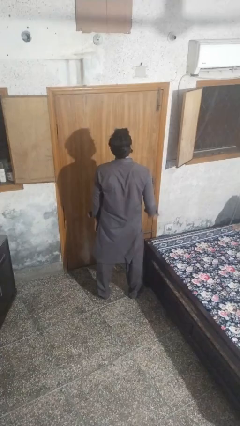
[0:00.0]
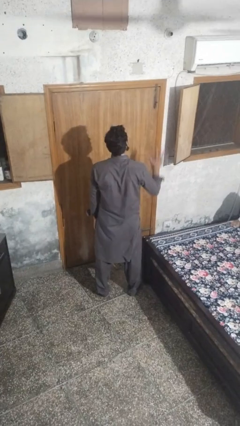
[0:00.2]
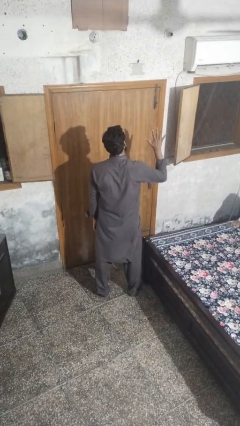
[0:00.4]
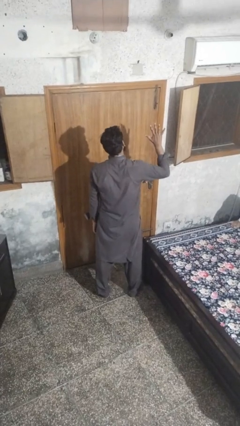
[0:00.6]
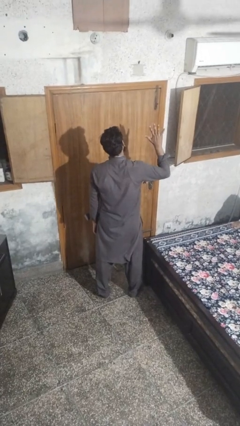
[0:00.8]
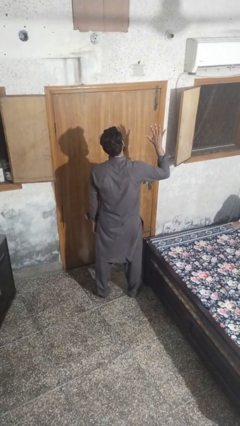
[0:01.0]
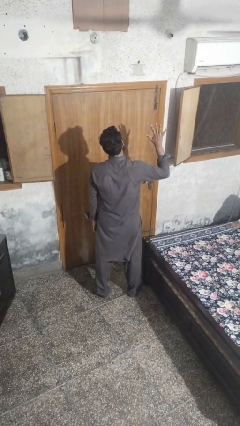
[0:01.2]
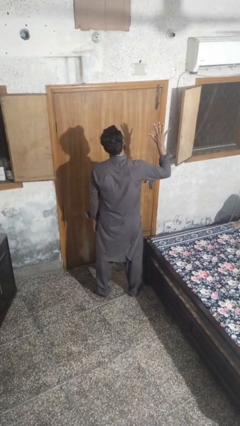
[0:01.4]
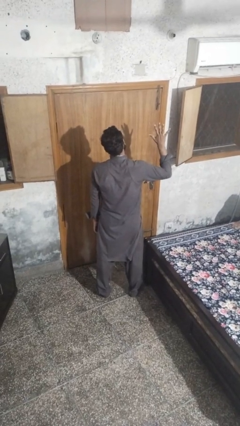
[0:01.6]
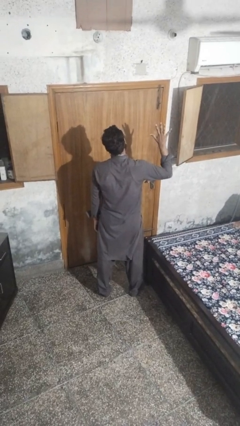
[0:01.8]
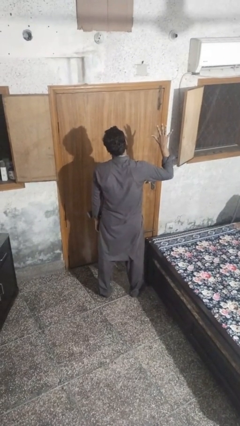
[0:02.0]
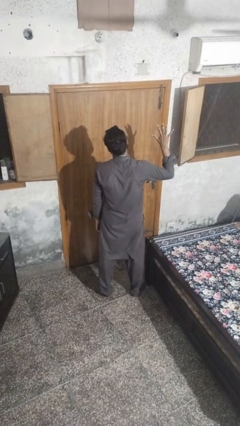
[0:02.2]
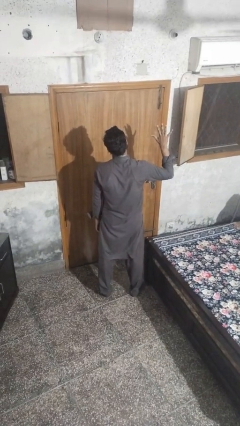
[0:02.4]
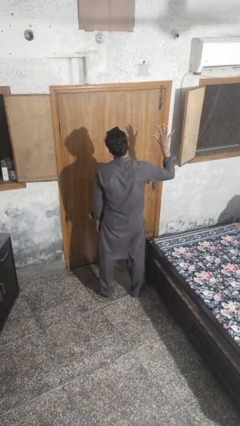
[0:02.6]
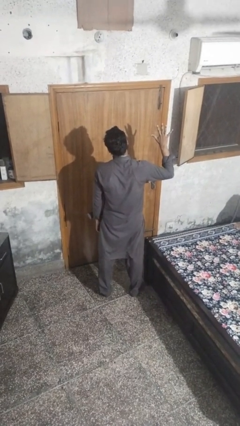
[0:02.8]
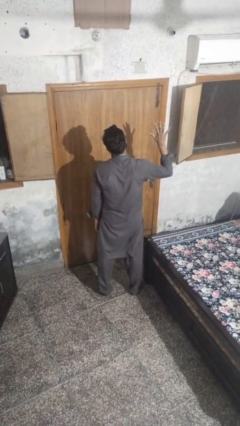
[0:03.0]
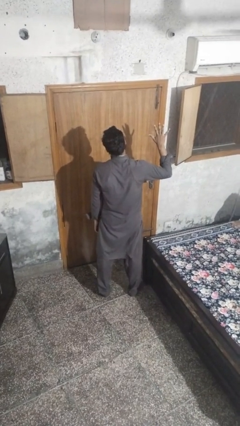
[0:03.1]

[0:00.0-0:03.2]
person gestures number five

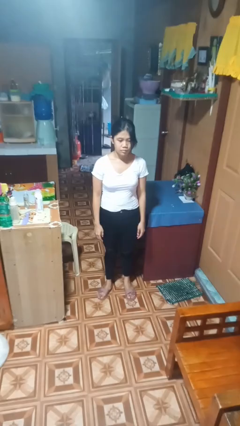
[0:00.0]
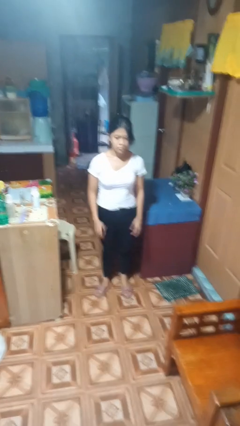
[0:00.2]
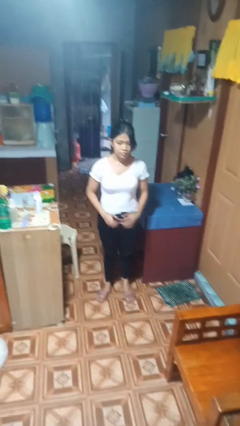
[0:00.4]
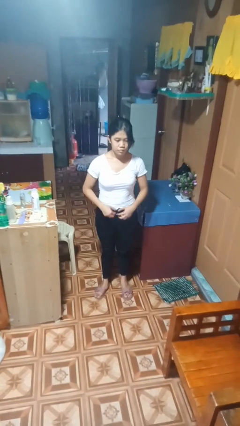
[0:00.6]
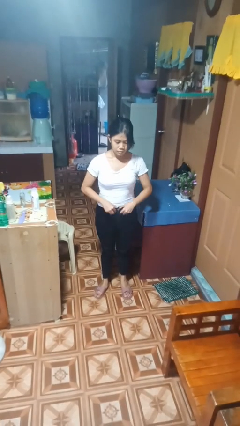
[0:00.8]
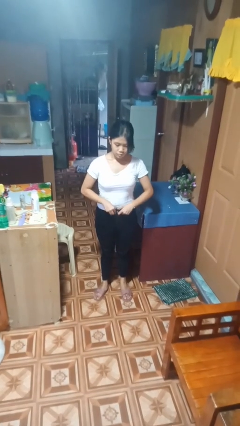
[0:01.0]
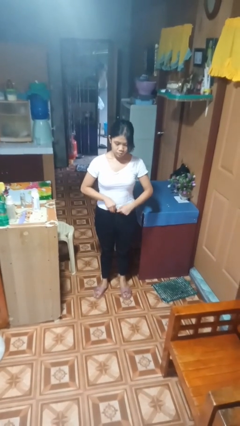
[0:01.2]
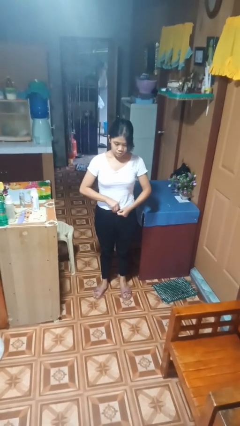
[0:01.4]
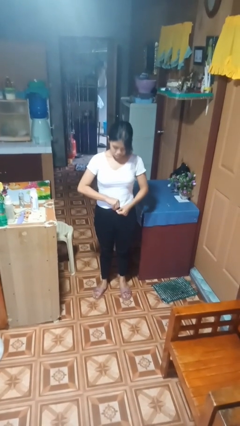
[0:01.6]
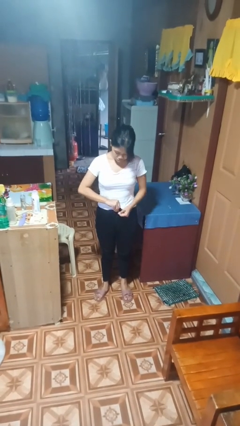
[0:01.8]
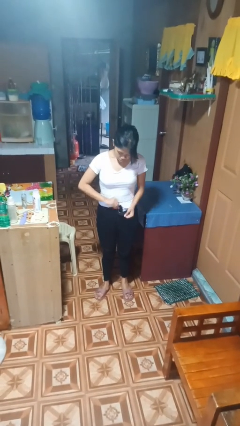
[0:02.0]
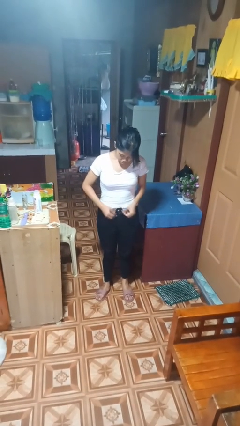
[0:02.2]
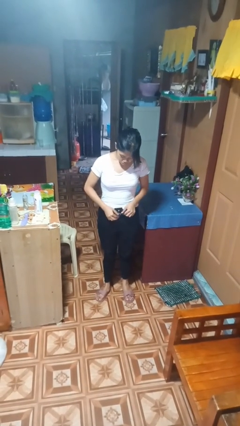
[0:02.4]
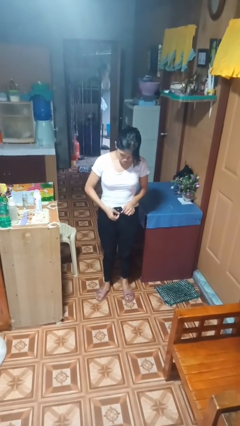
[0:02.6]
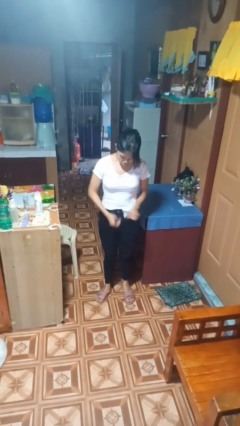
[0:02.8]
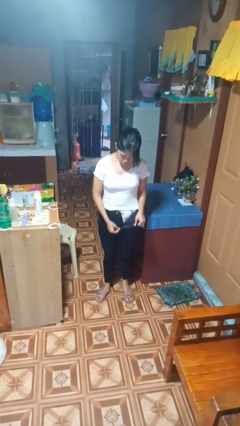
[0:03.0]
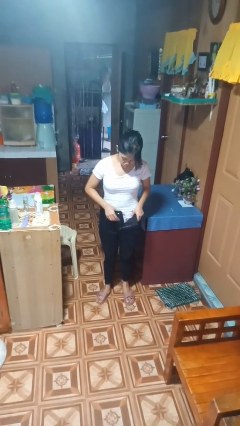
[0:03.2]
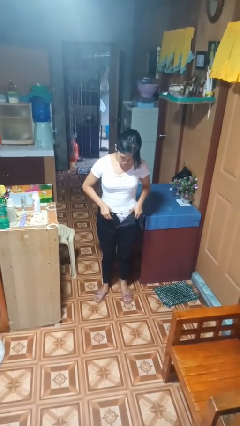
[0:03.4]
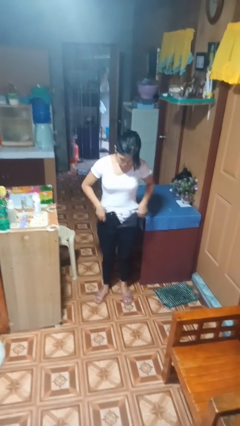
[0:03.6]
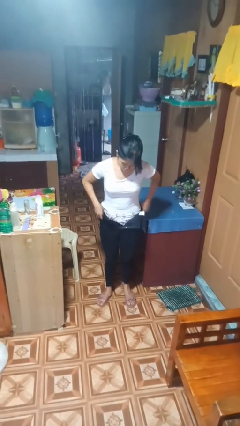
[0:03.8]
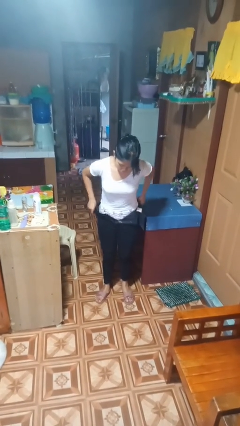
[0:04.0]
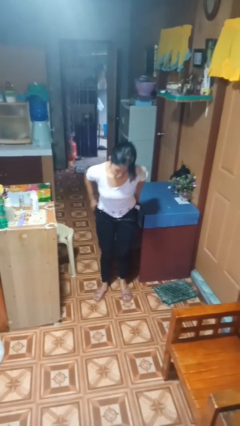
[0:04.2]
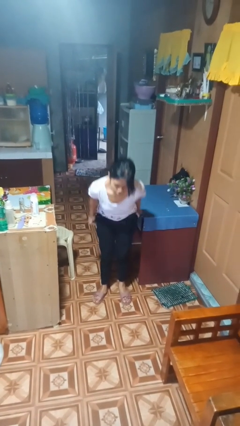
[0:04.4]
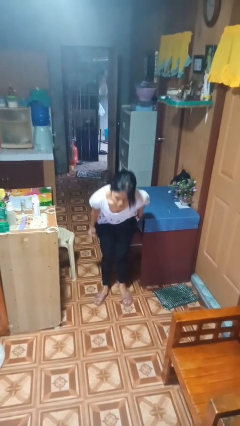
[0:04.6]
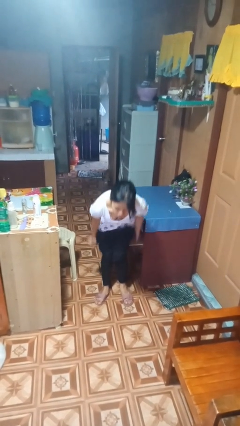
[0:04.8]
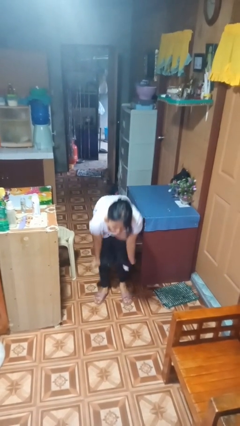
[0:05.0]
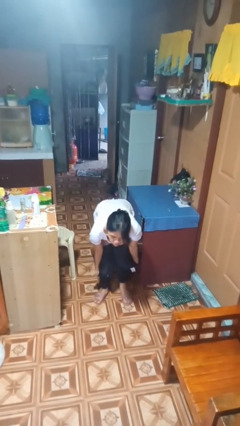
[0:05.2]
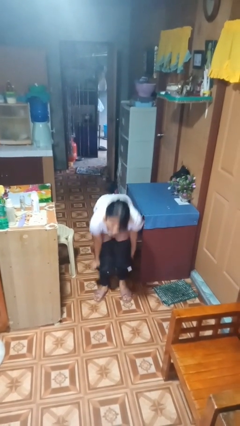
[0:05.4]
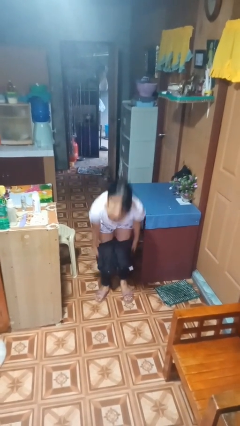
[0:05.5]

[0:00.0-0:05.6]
person takes off pants

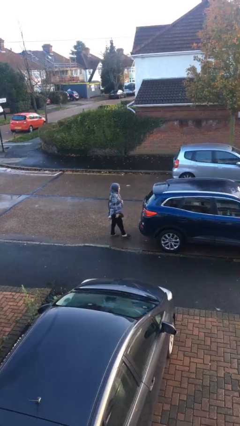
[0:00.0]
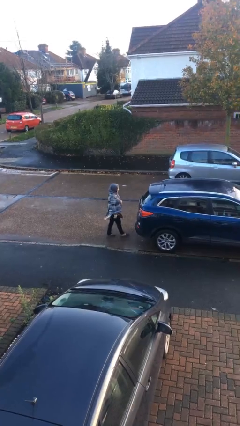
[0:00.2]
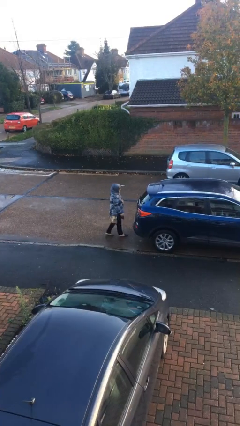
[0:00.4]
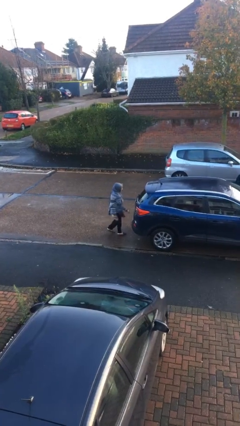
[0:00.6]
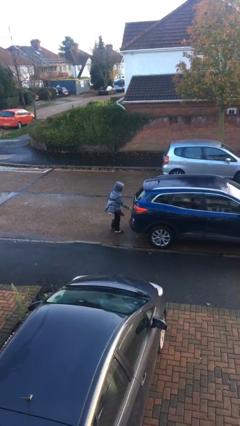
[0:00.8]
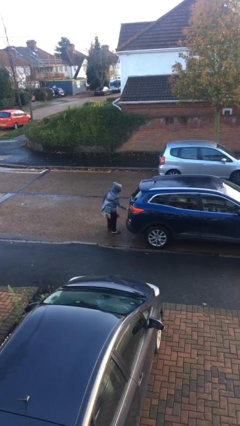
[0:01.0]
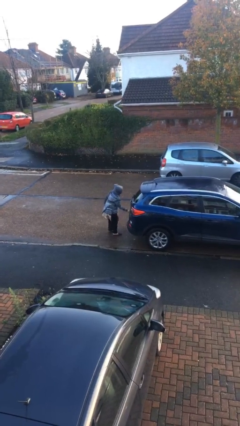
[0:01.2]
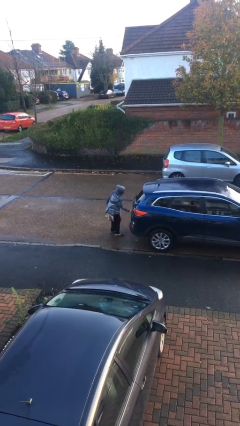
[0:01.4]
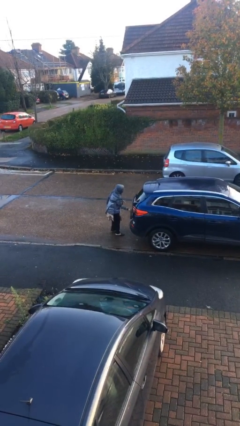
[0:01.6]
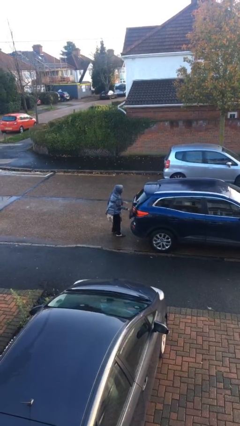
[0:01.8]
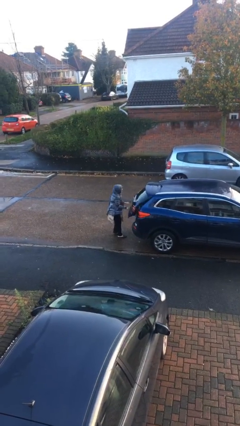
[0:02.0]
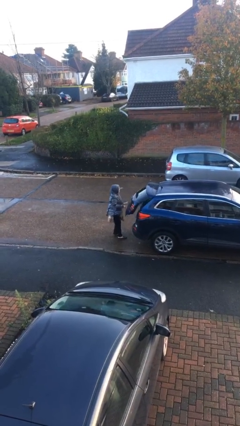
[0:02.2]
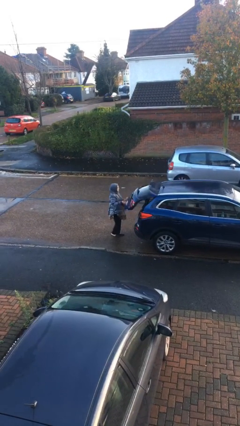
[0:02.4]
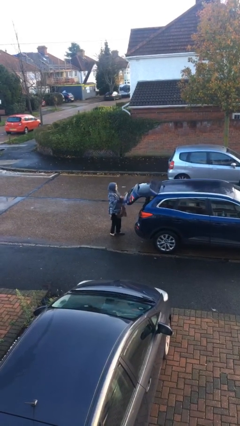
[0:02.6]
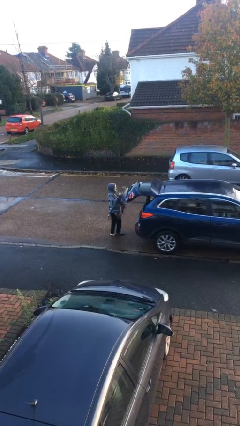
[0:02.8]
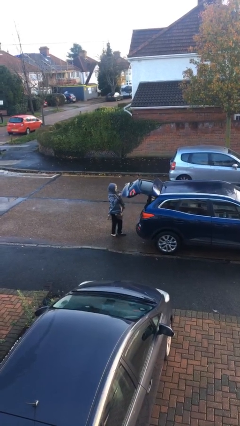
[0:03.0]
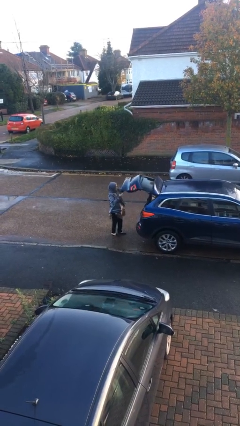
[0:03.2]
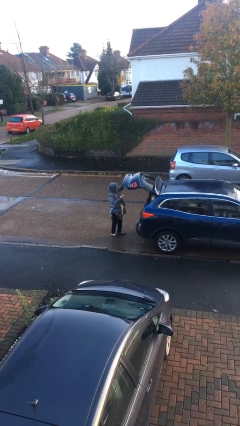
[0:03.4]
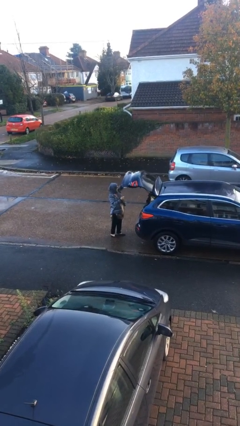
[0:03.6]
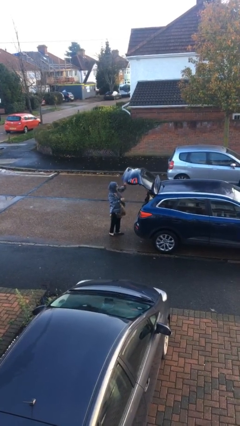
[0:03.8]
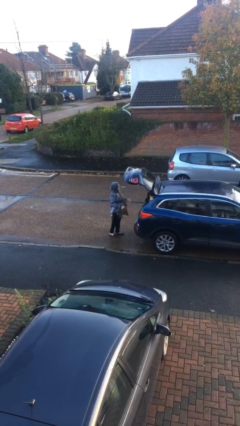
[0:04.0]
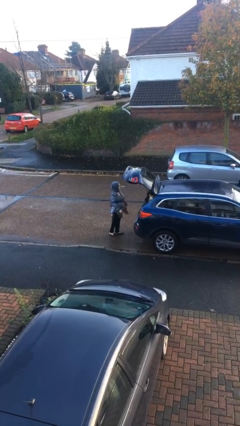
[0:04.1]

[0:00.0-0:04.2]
person opens car trunk

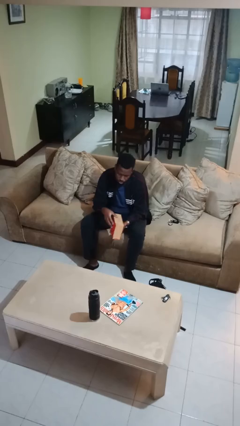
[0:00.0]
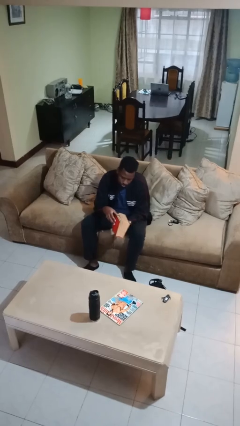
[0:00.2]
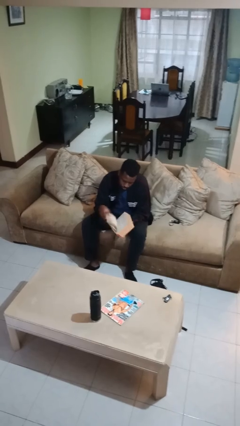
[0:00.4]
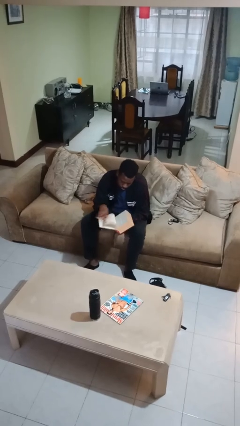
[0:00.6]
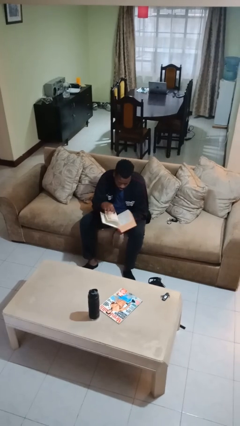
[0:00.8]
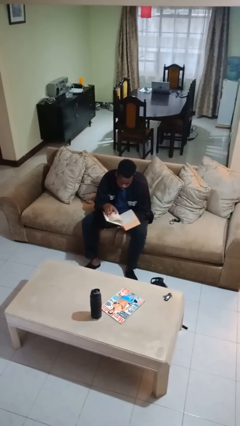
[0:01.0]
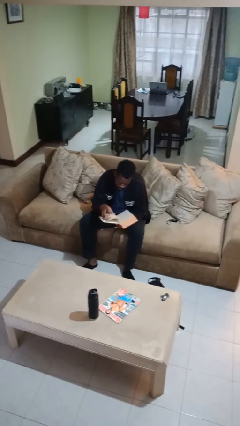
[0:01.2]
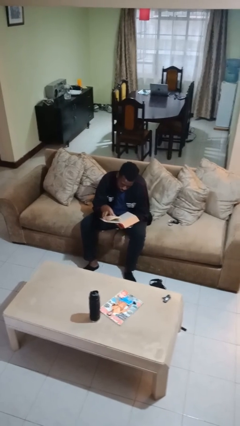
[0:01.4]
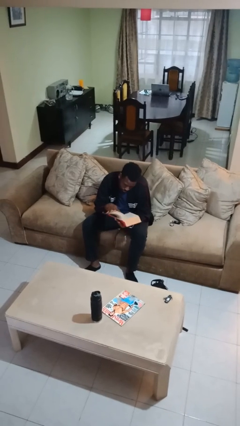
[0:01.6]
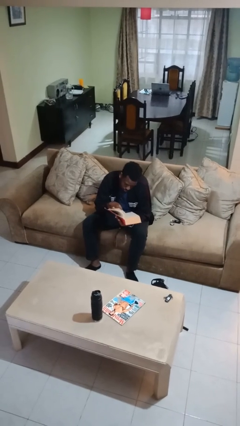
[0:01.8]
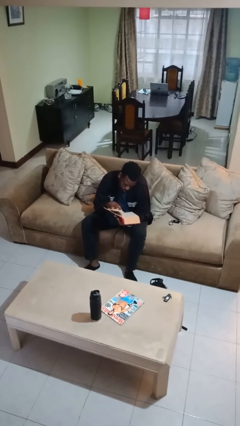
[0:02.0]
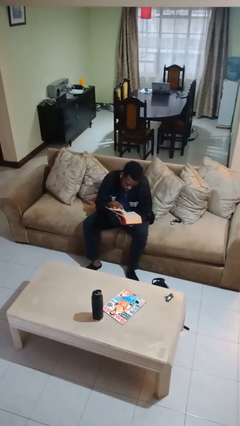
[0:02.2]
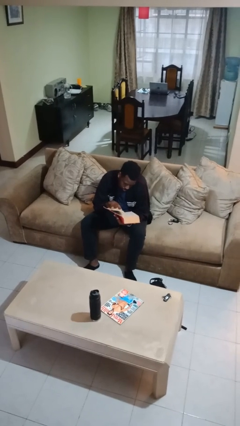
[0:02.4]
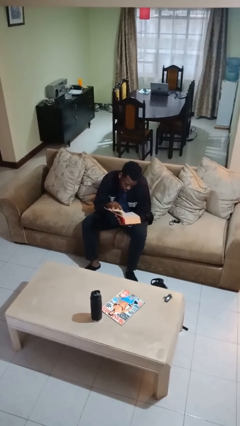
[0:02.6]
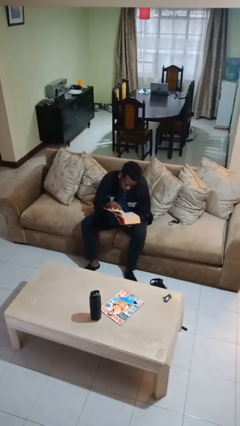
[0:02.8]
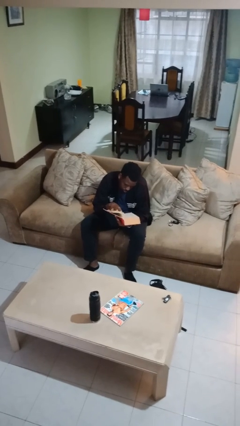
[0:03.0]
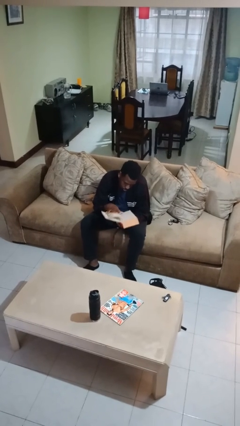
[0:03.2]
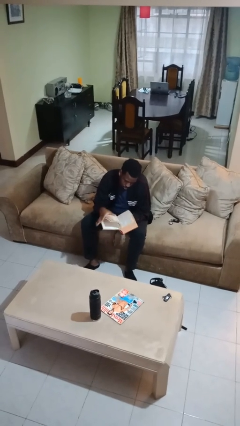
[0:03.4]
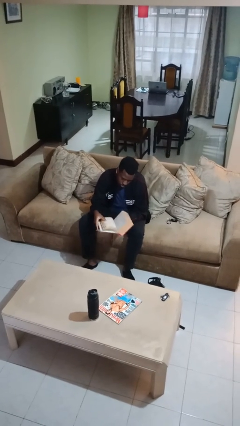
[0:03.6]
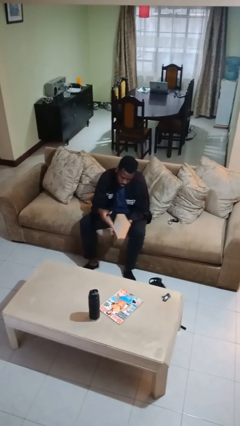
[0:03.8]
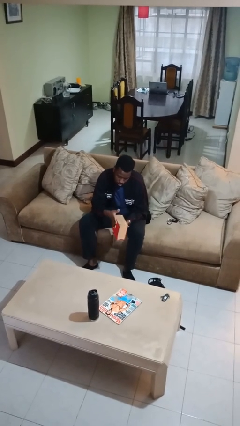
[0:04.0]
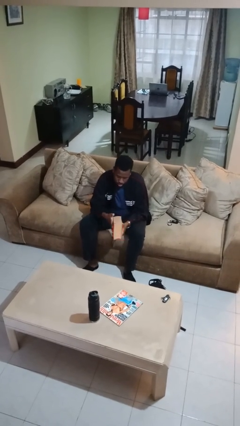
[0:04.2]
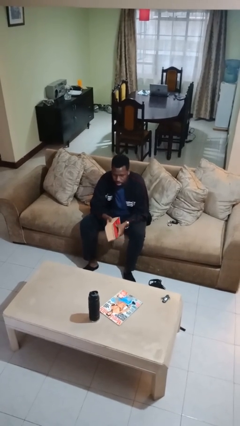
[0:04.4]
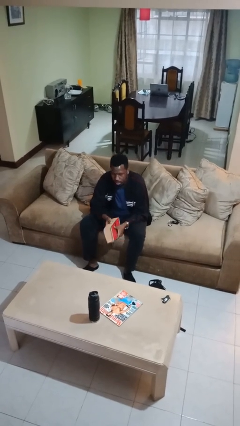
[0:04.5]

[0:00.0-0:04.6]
person reads book
